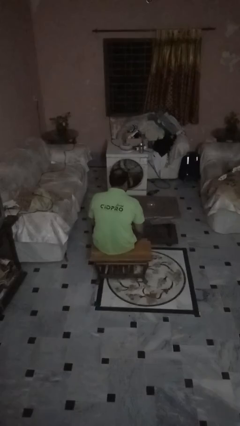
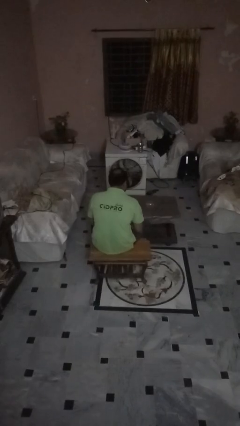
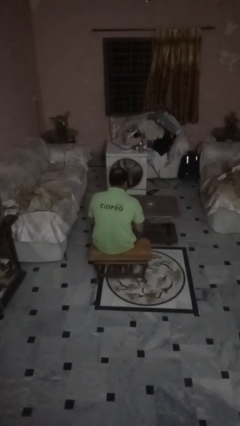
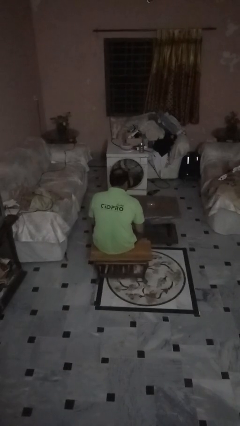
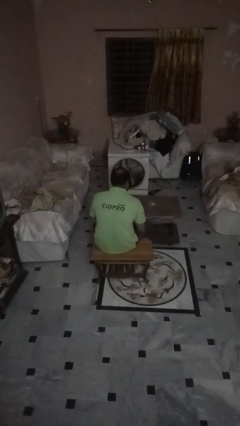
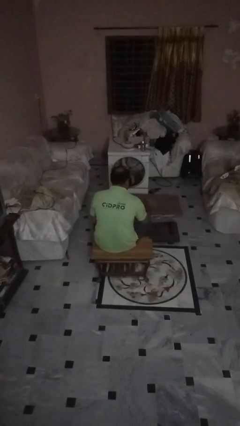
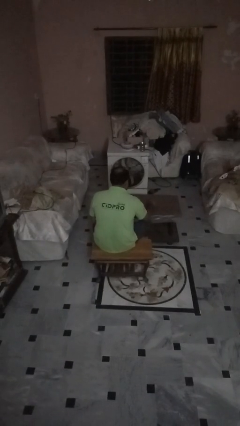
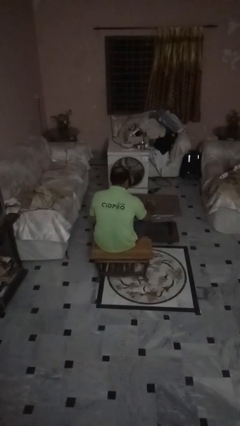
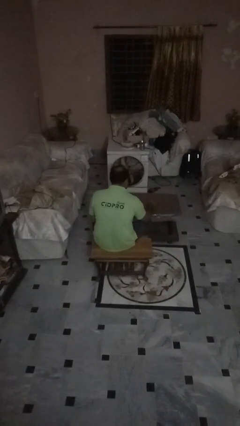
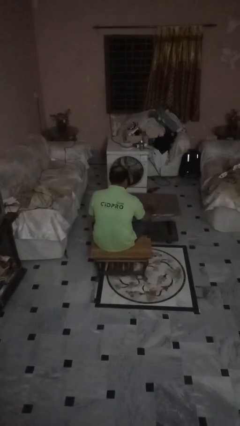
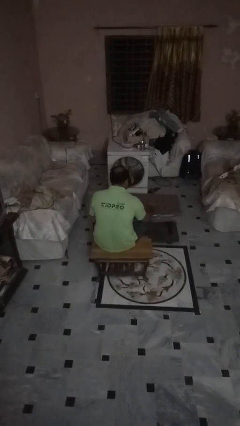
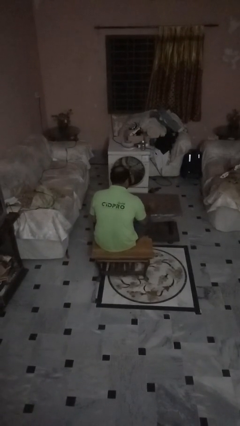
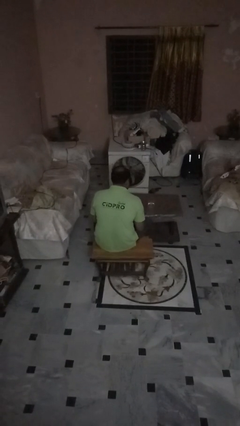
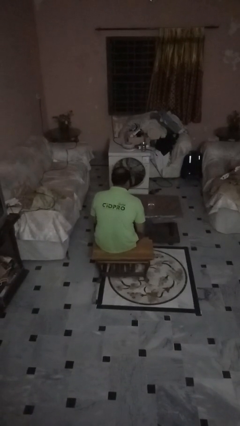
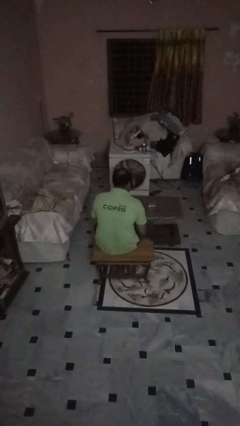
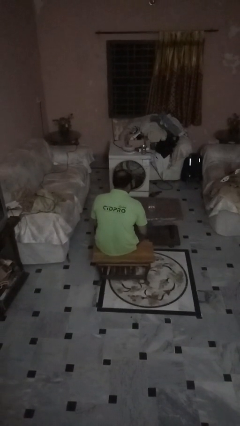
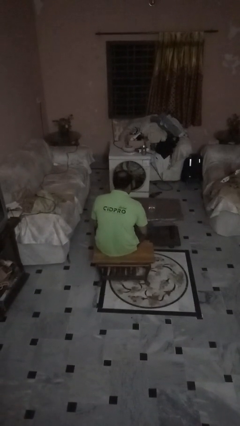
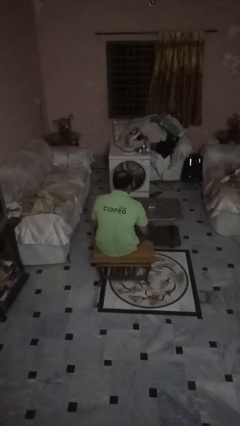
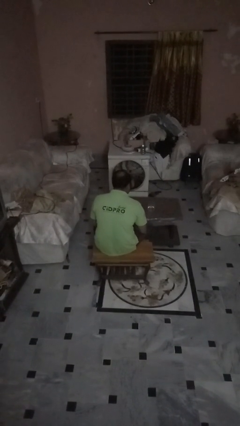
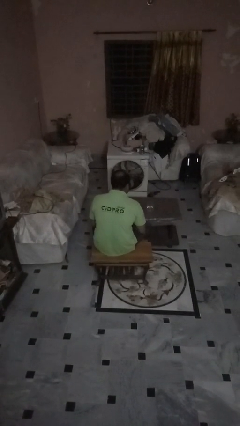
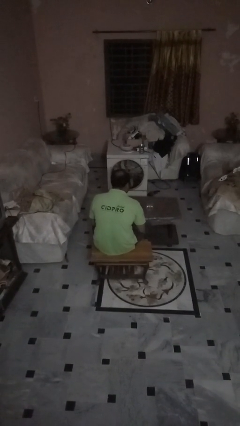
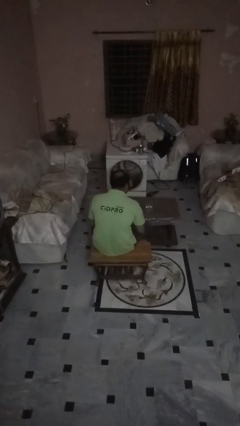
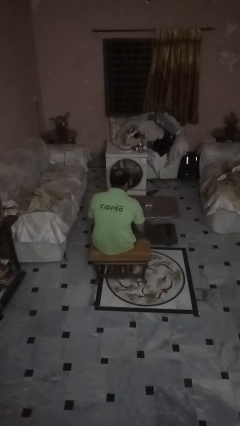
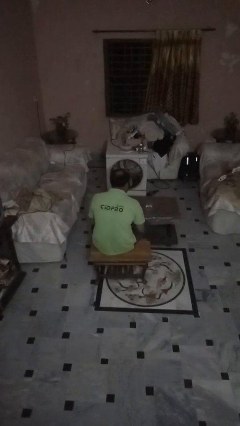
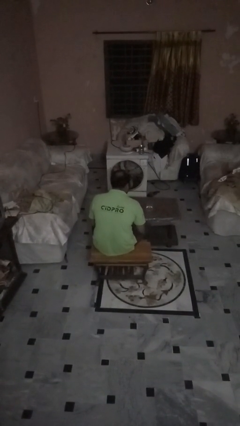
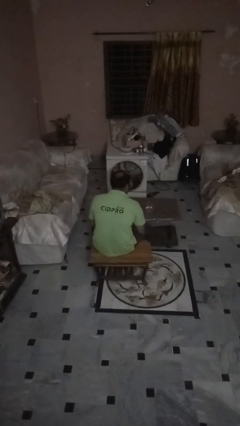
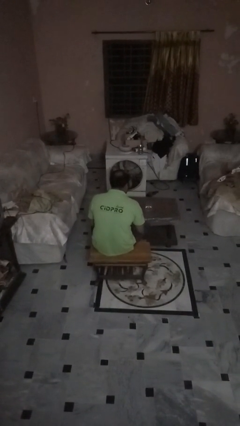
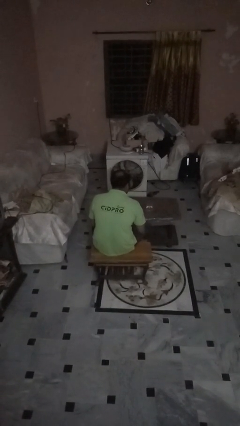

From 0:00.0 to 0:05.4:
person sets upright glass

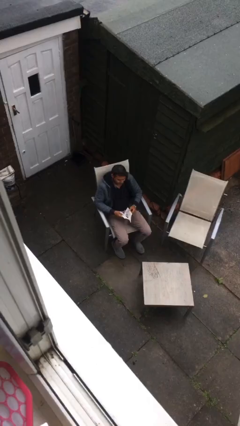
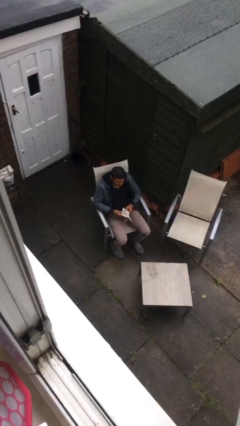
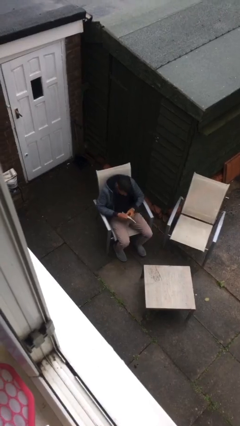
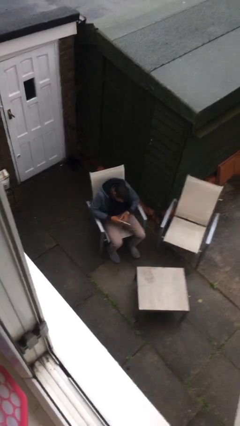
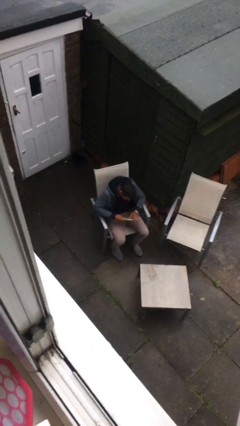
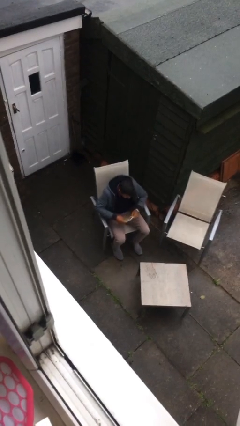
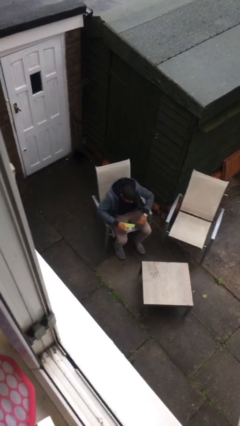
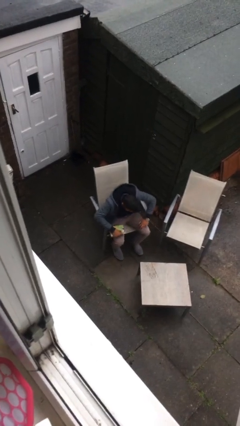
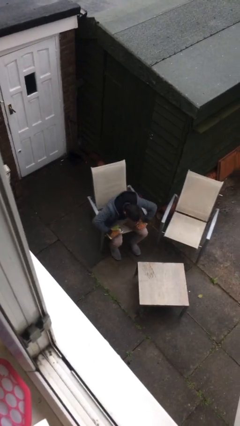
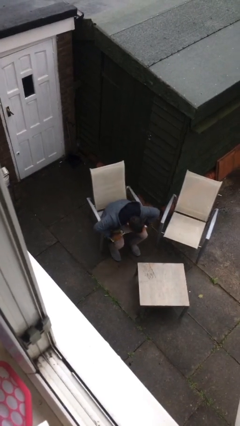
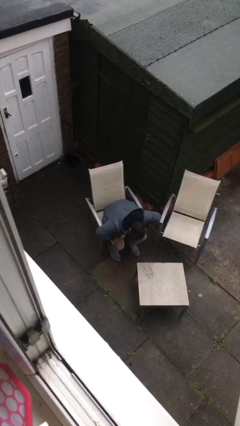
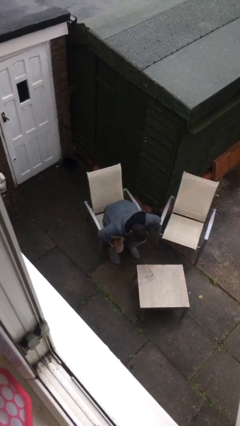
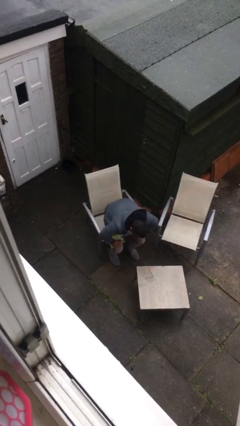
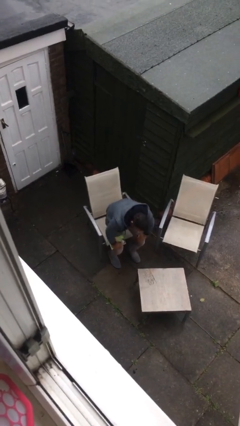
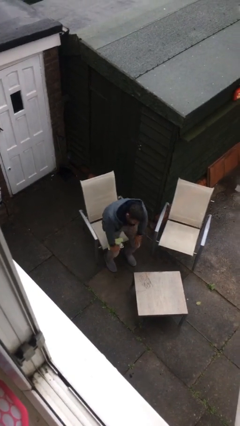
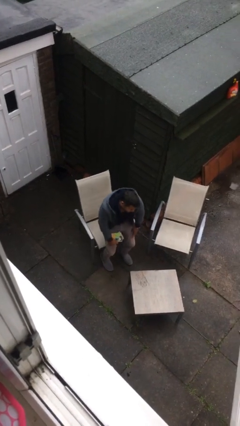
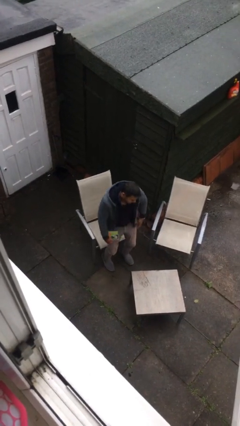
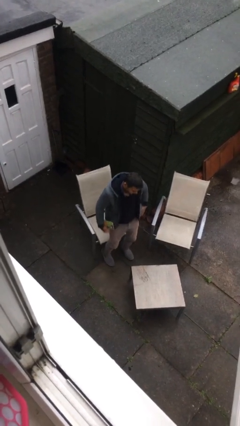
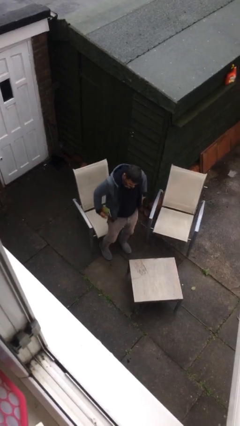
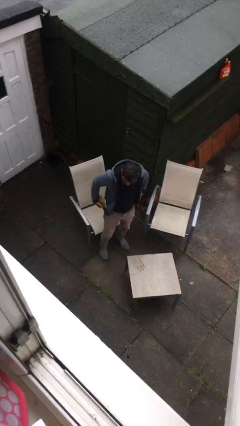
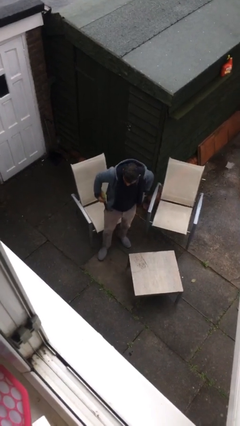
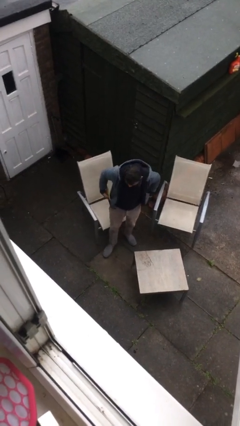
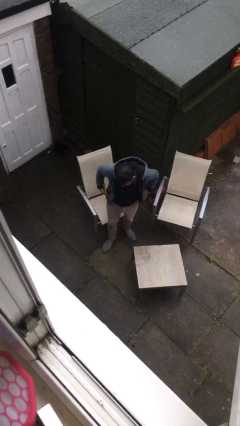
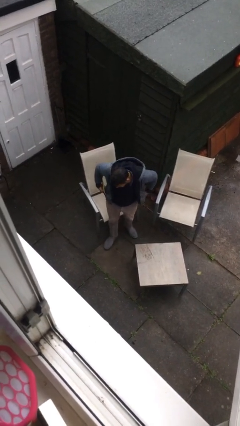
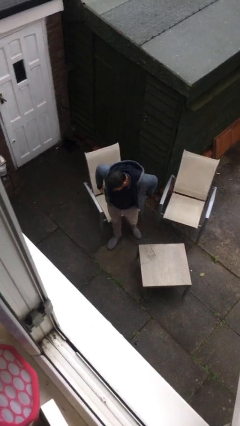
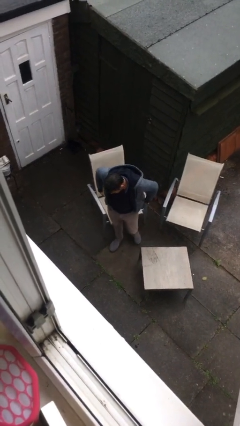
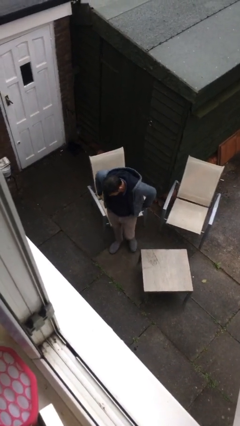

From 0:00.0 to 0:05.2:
person stands up

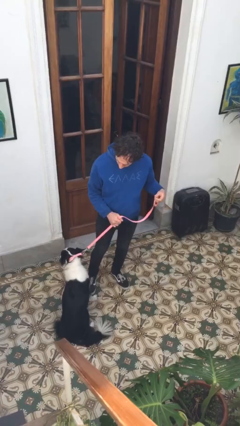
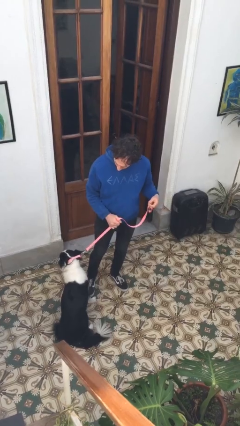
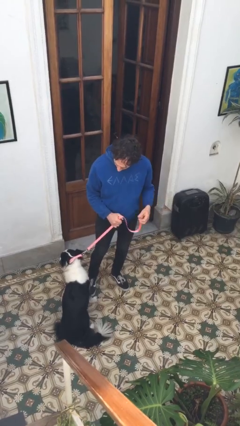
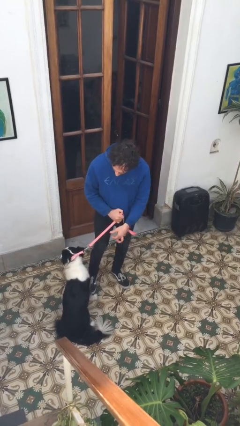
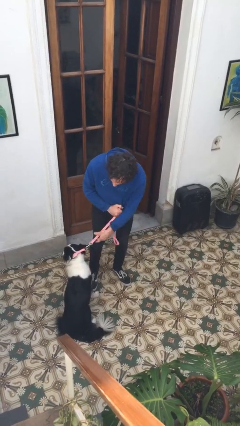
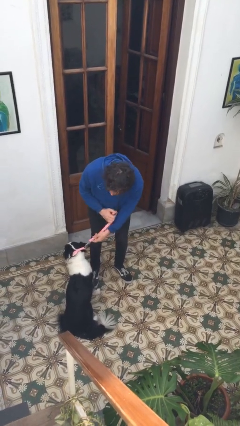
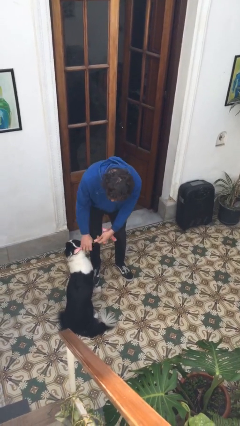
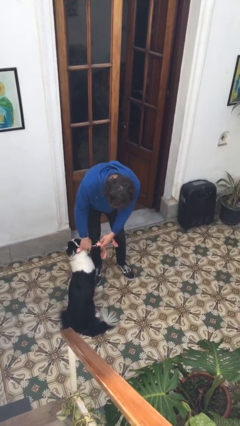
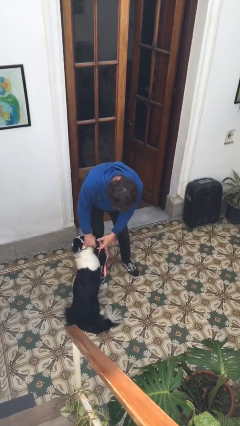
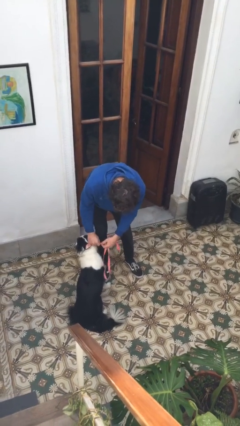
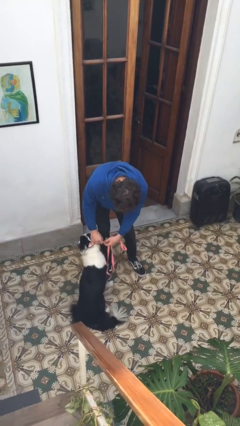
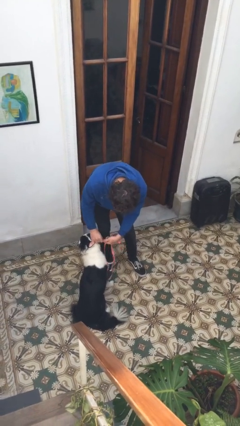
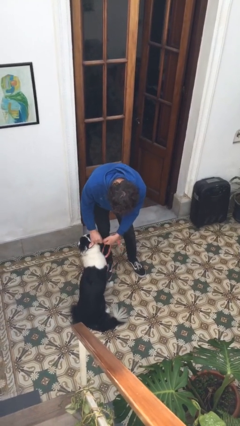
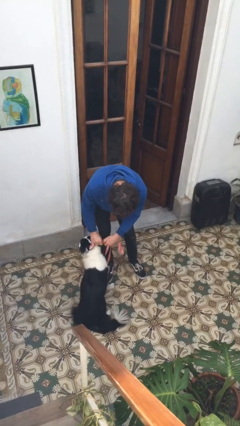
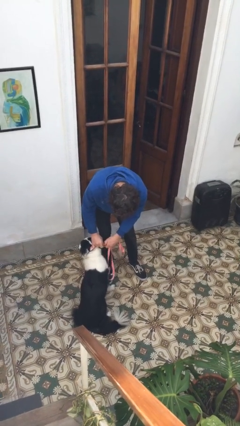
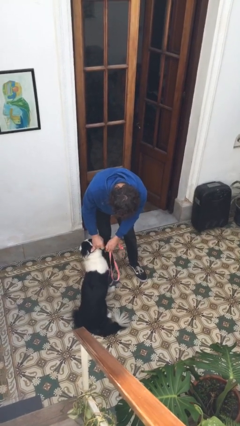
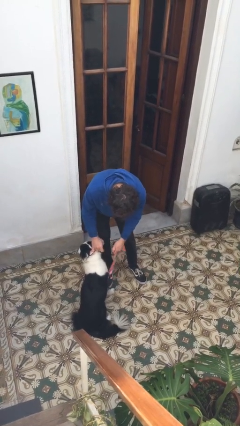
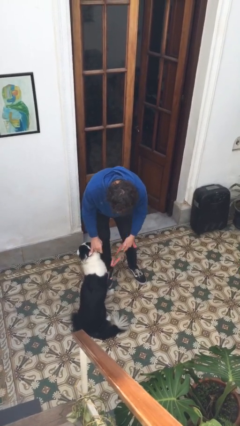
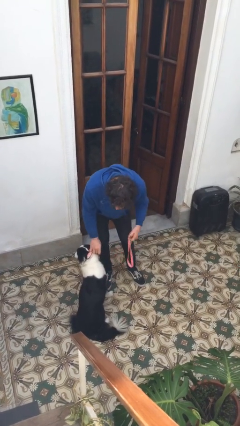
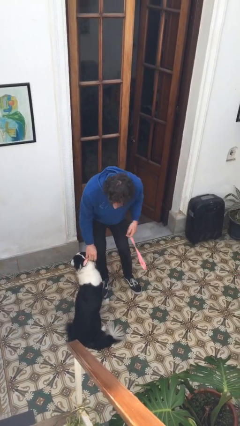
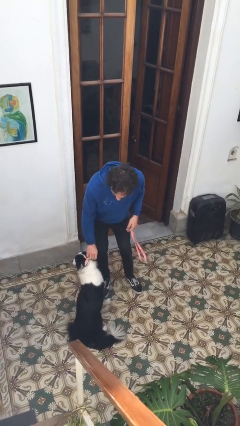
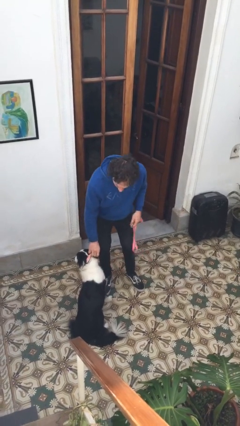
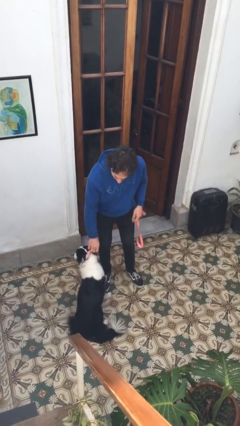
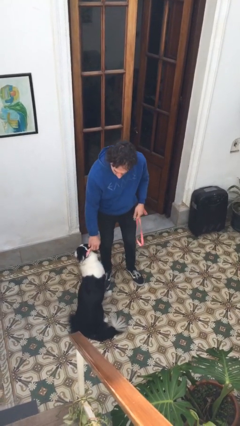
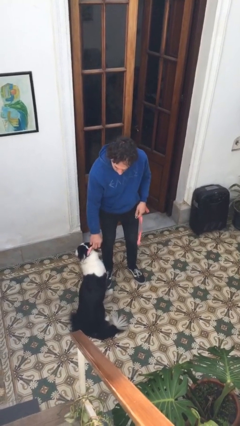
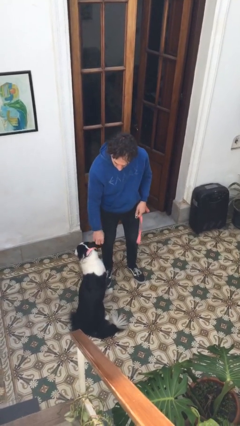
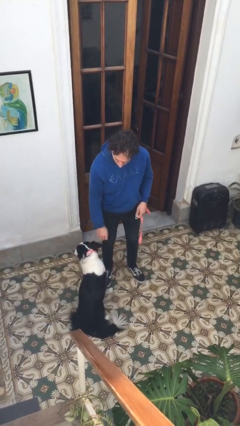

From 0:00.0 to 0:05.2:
person unattaches leash from dog

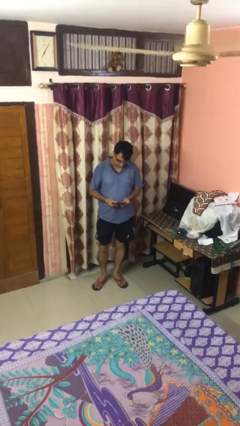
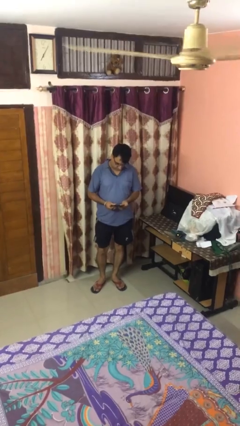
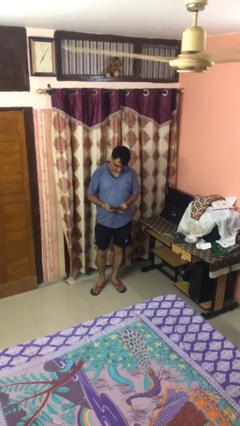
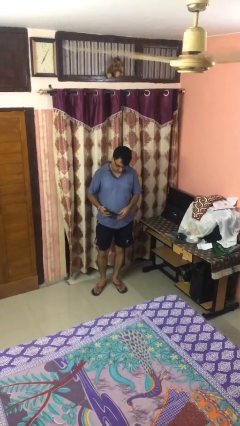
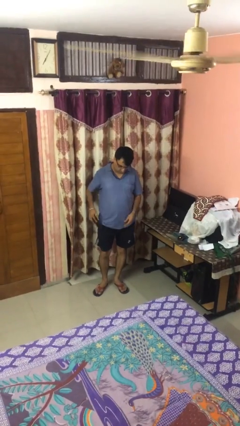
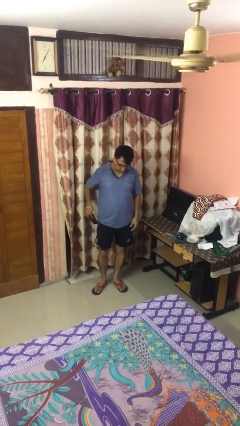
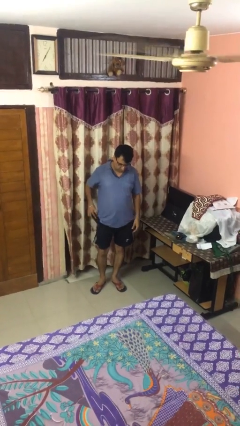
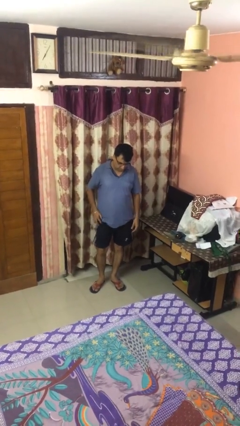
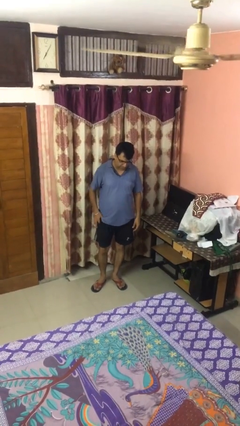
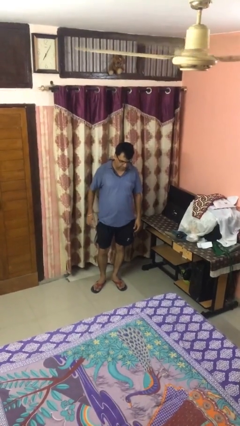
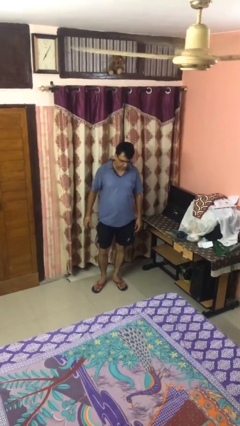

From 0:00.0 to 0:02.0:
person puts phone into pocket
